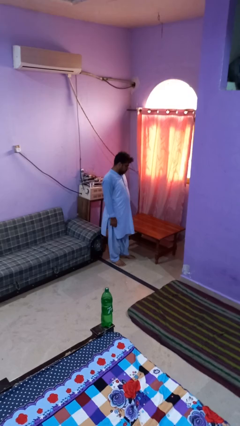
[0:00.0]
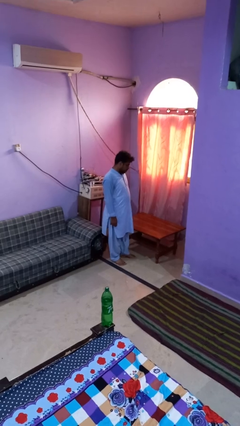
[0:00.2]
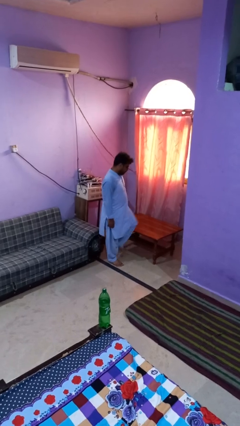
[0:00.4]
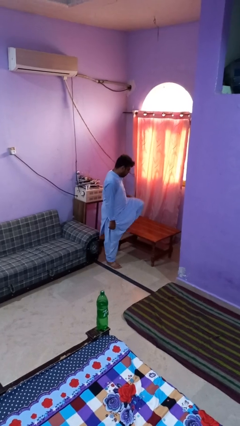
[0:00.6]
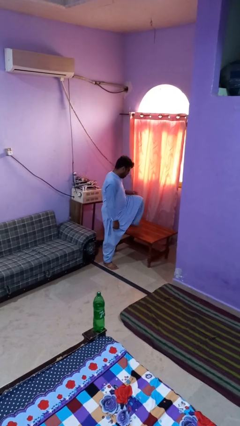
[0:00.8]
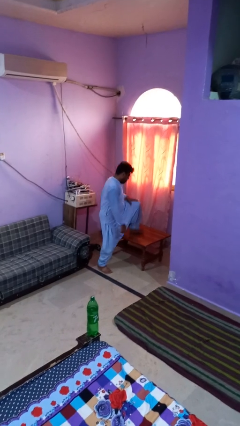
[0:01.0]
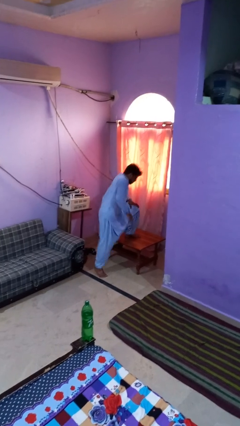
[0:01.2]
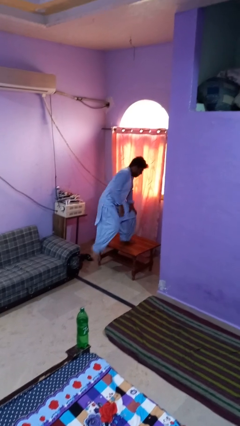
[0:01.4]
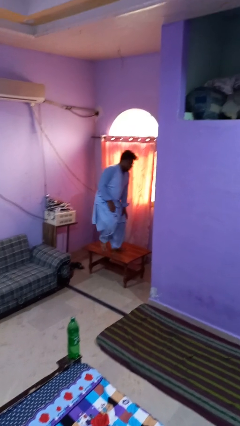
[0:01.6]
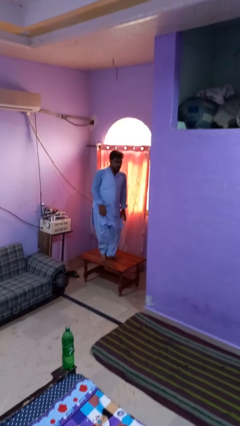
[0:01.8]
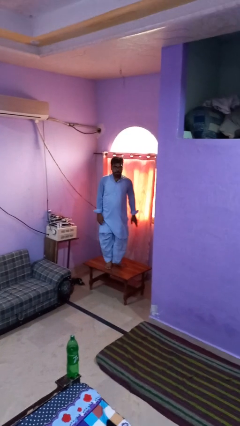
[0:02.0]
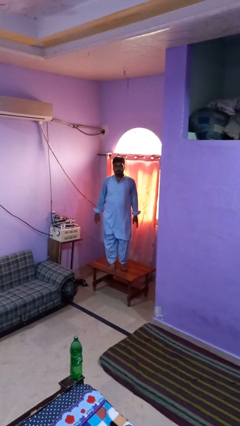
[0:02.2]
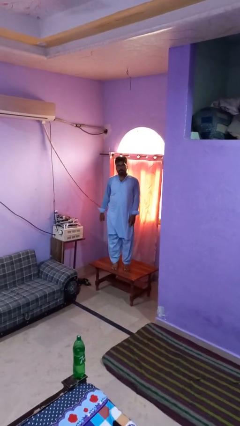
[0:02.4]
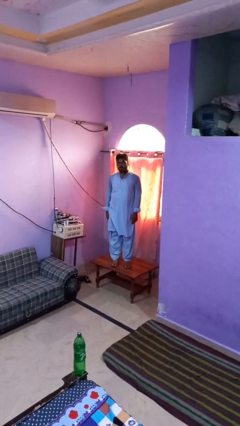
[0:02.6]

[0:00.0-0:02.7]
person climbs on table

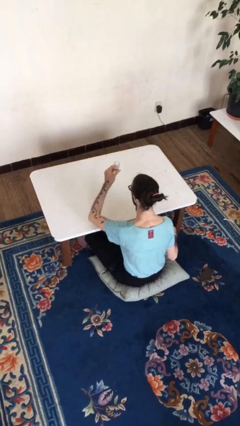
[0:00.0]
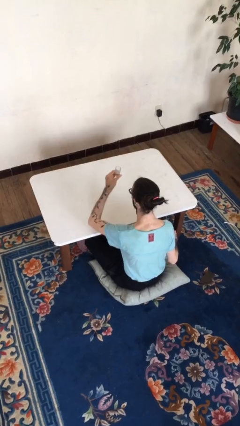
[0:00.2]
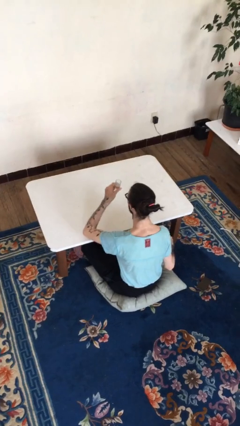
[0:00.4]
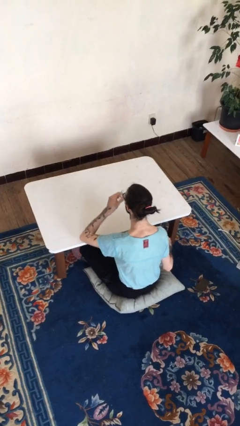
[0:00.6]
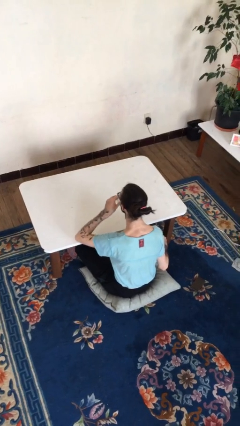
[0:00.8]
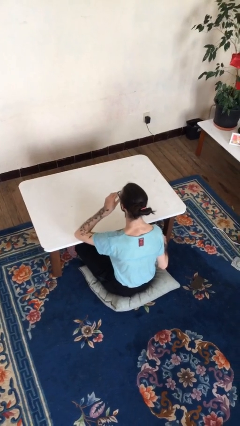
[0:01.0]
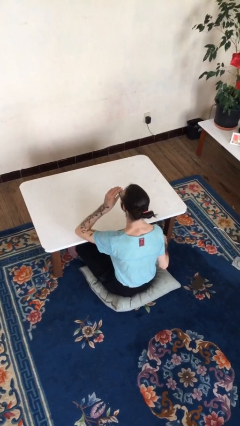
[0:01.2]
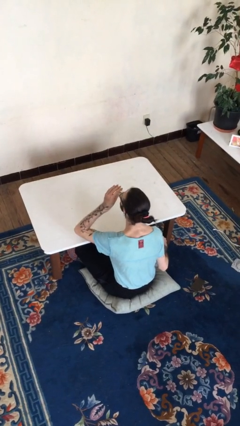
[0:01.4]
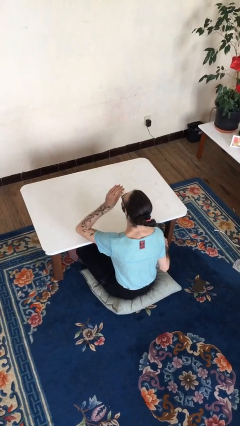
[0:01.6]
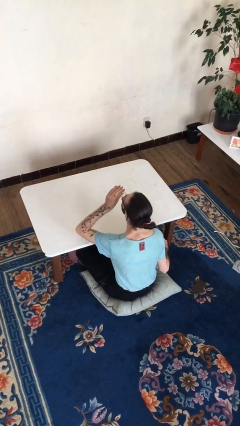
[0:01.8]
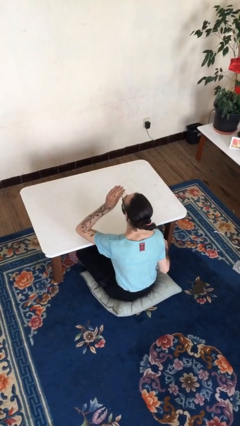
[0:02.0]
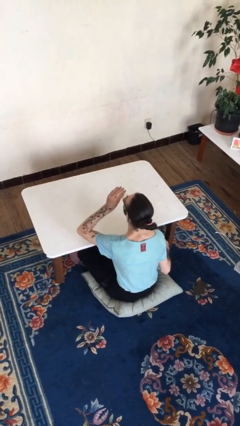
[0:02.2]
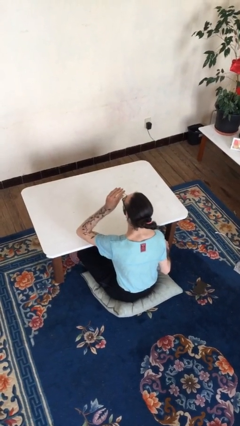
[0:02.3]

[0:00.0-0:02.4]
person drinks from shotglass

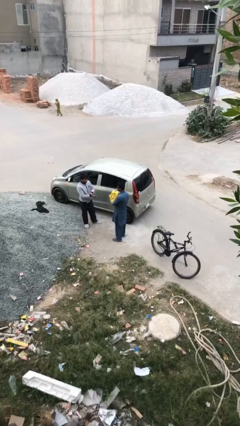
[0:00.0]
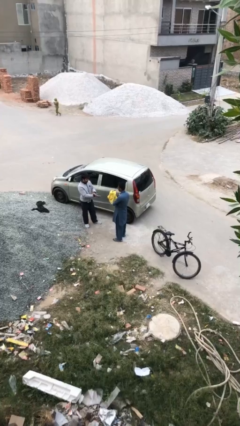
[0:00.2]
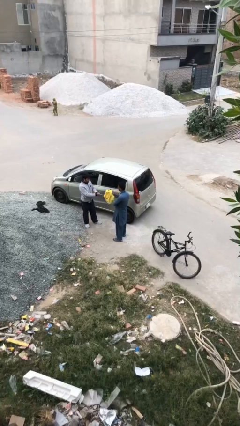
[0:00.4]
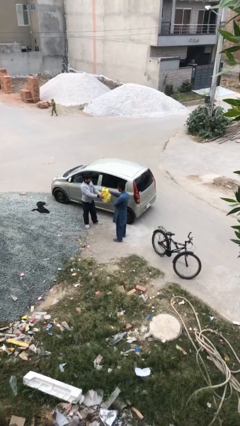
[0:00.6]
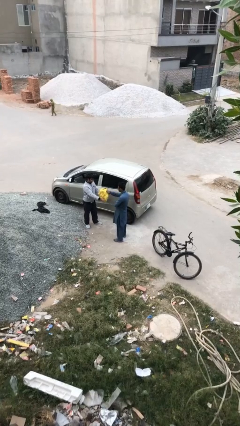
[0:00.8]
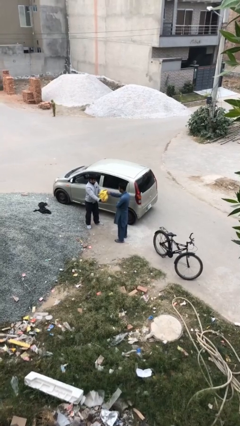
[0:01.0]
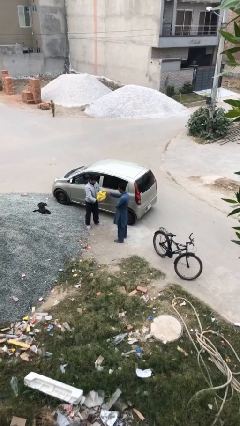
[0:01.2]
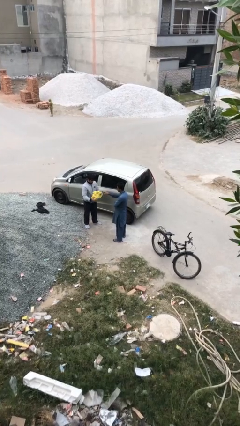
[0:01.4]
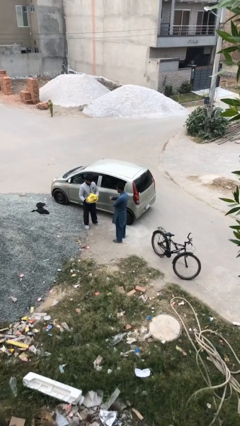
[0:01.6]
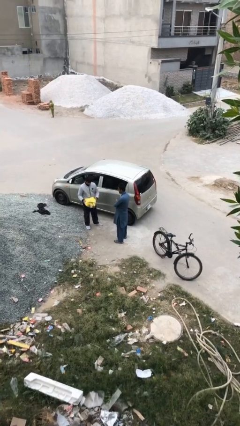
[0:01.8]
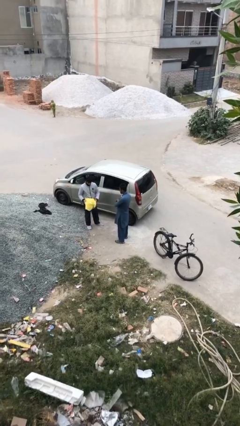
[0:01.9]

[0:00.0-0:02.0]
person transfers object to person

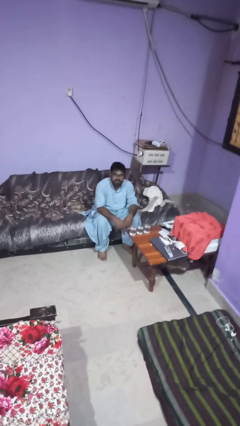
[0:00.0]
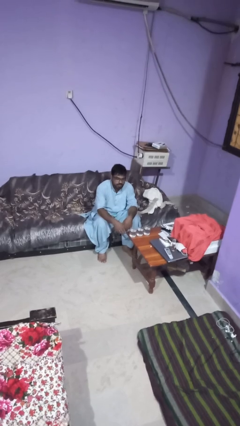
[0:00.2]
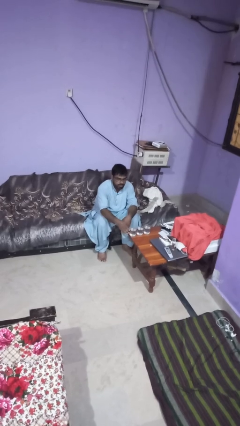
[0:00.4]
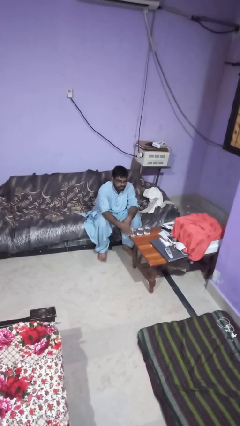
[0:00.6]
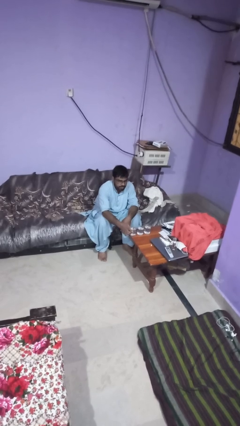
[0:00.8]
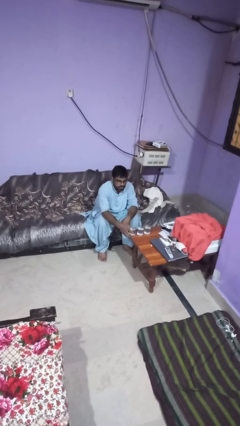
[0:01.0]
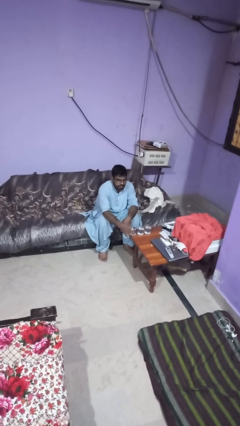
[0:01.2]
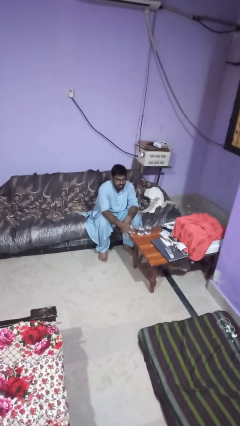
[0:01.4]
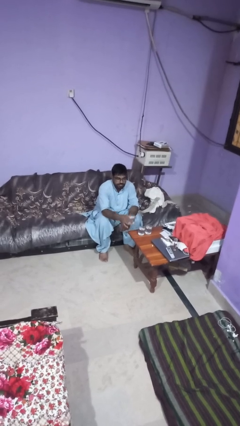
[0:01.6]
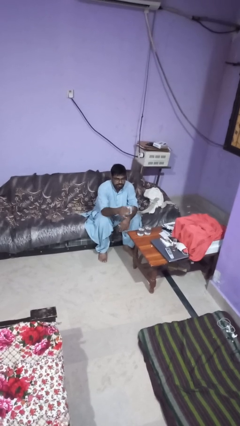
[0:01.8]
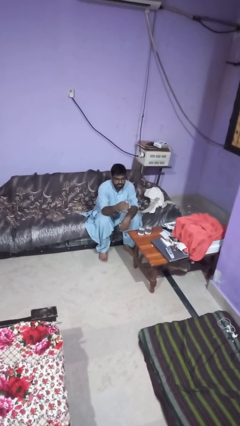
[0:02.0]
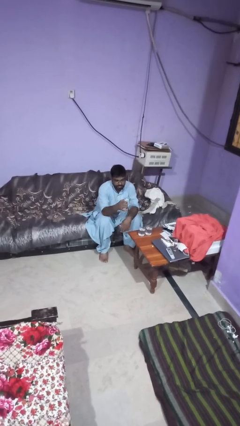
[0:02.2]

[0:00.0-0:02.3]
person picks up object from table

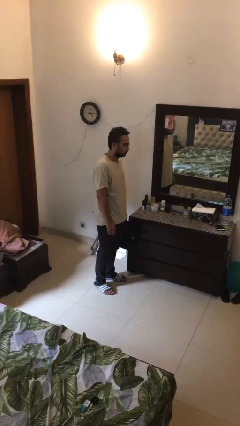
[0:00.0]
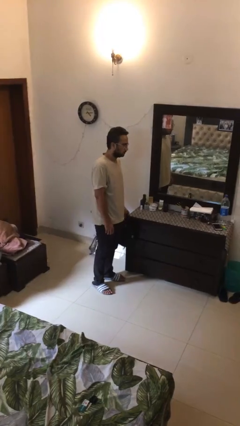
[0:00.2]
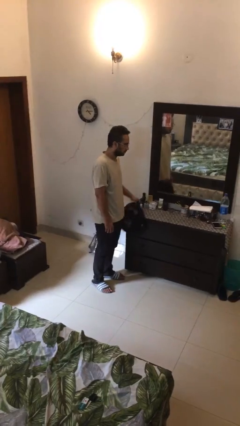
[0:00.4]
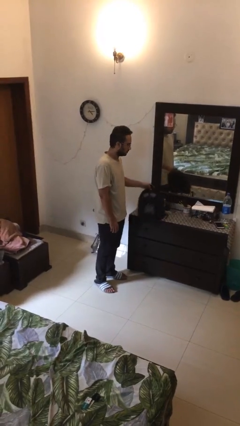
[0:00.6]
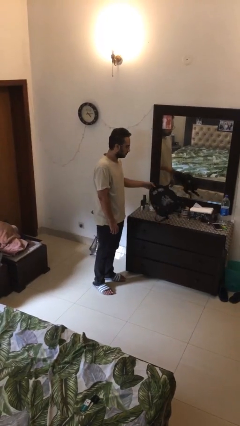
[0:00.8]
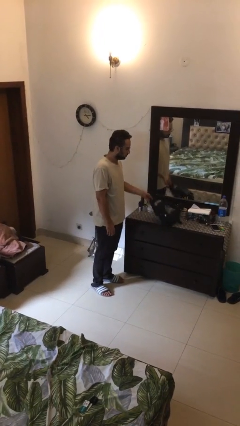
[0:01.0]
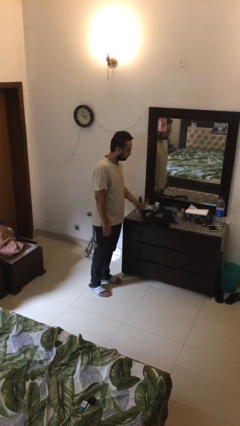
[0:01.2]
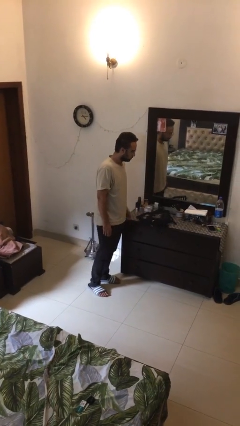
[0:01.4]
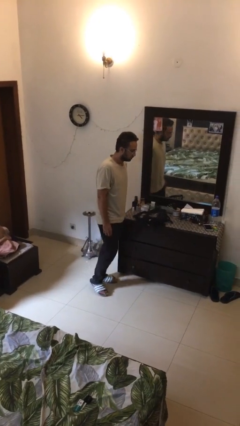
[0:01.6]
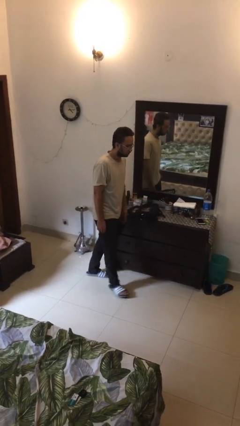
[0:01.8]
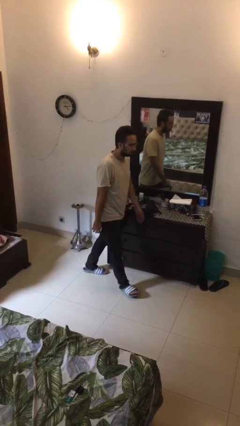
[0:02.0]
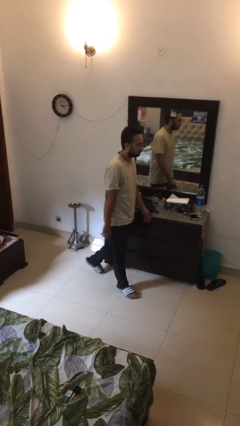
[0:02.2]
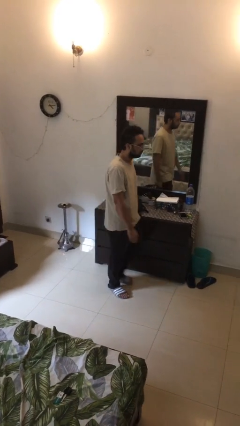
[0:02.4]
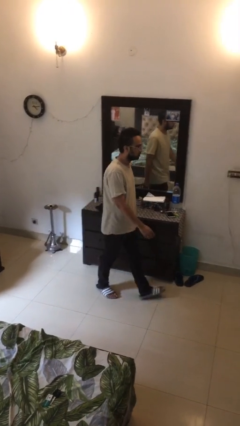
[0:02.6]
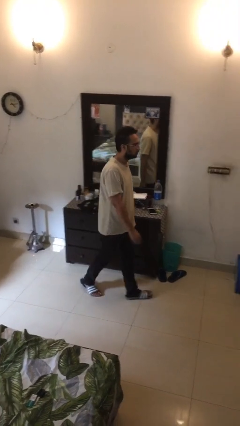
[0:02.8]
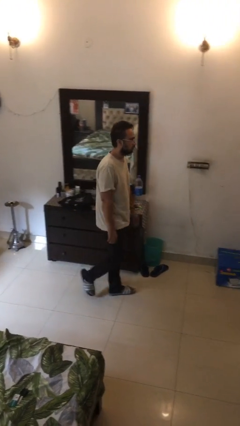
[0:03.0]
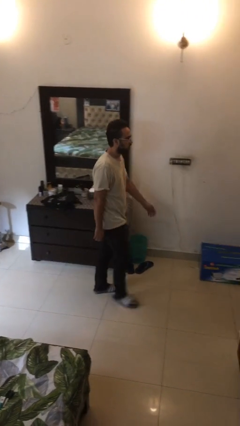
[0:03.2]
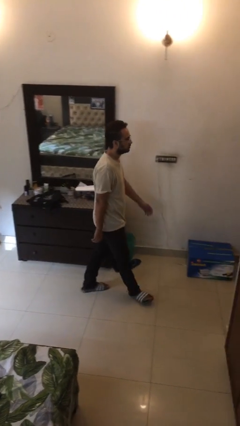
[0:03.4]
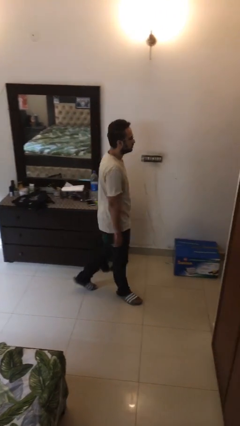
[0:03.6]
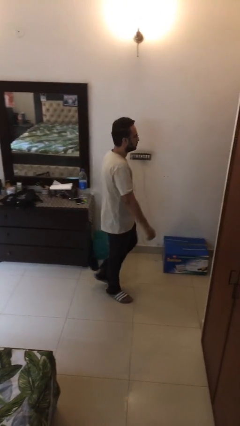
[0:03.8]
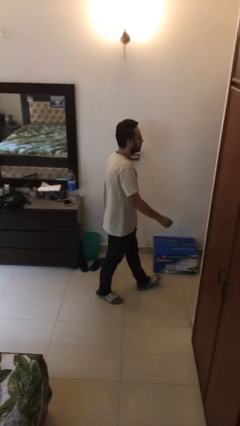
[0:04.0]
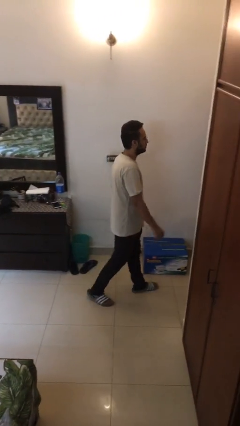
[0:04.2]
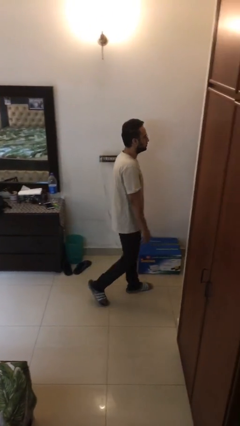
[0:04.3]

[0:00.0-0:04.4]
person puts down object on table

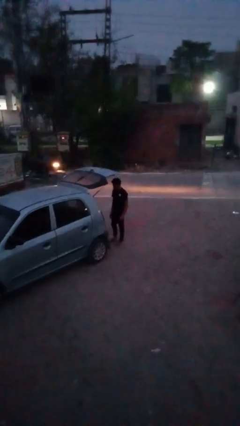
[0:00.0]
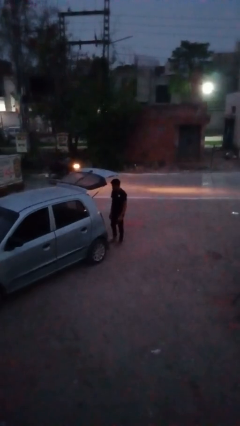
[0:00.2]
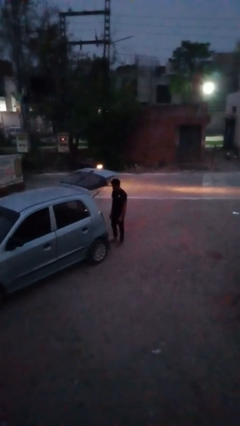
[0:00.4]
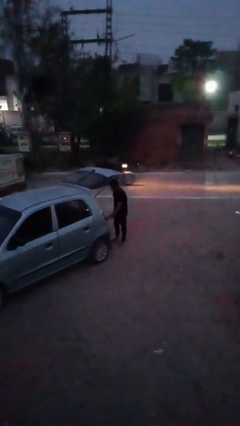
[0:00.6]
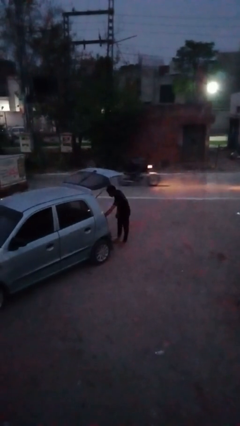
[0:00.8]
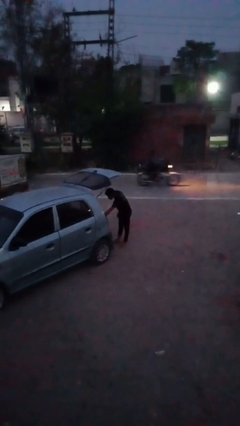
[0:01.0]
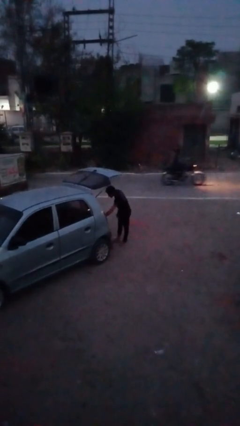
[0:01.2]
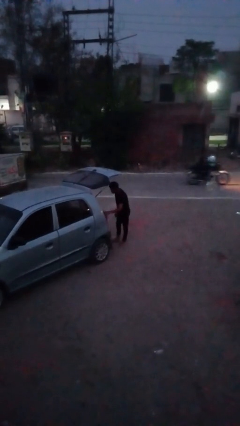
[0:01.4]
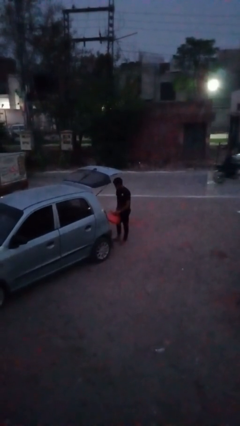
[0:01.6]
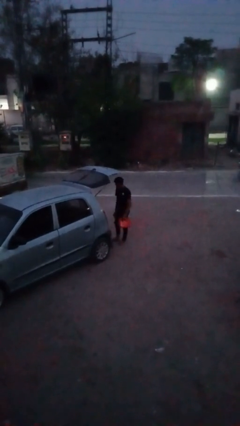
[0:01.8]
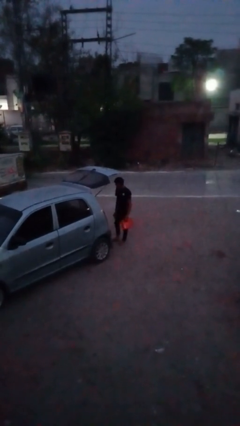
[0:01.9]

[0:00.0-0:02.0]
person unloads car

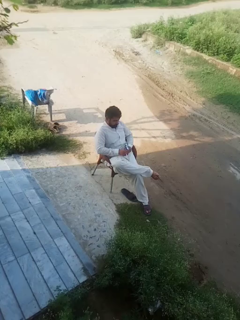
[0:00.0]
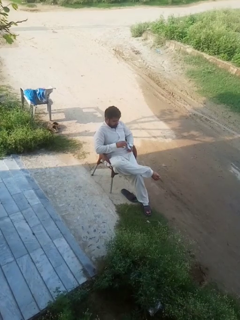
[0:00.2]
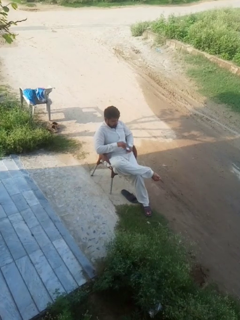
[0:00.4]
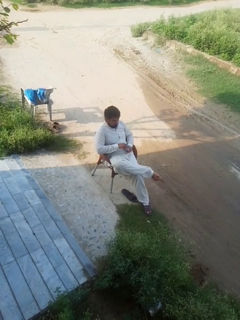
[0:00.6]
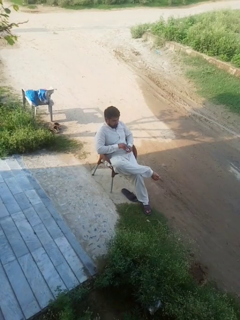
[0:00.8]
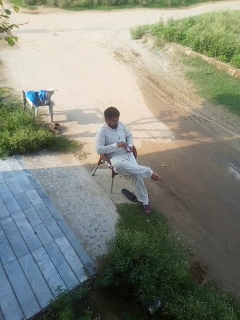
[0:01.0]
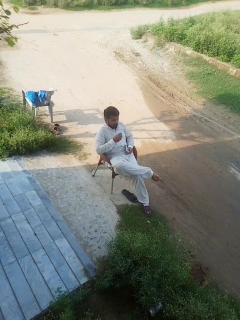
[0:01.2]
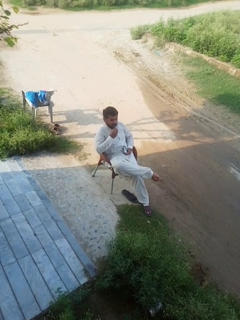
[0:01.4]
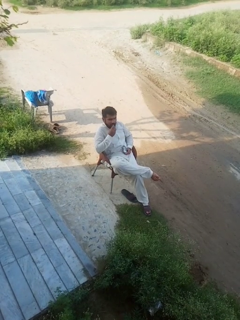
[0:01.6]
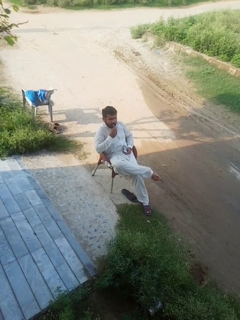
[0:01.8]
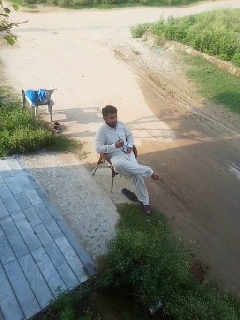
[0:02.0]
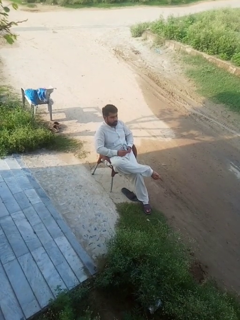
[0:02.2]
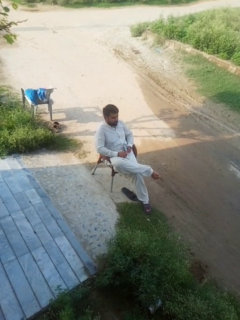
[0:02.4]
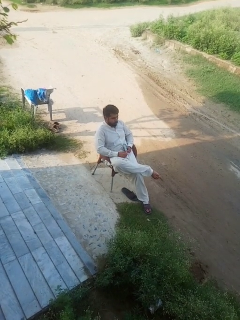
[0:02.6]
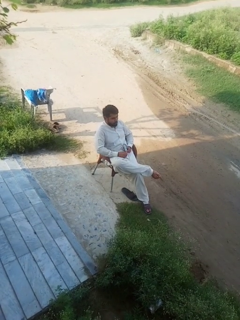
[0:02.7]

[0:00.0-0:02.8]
person eats snack from bag
